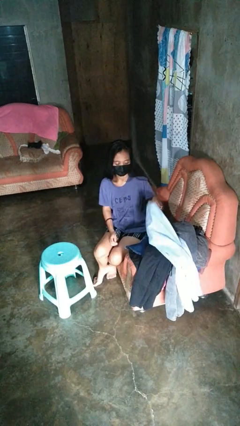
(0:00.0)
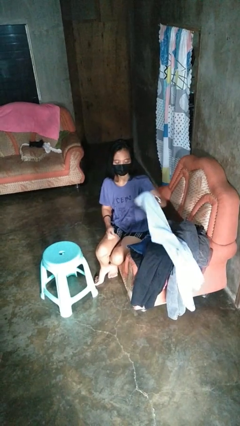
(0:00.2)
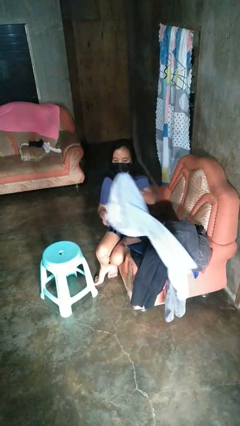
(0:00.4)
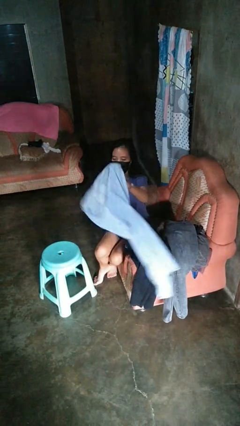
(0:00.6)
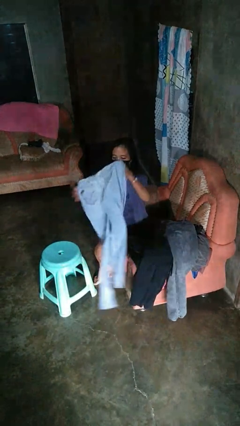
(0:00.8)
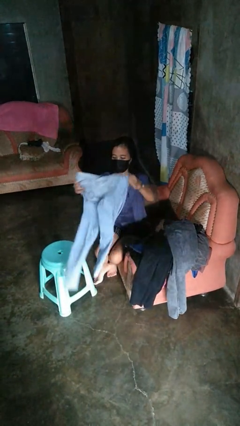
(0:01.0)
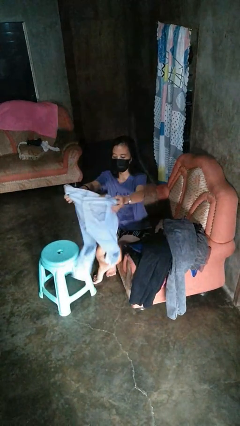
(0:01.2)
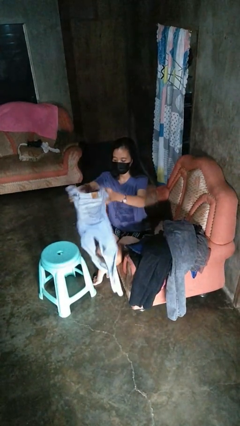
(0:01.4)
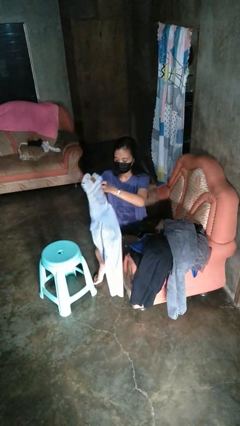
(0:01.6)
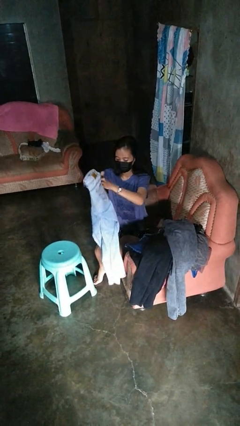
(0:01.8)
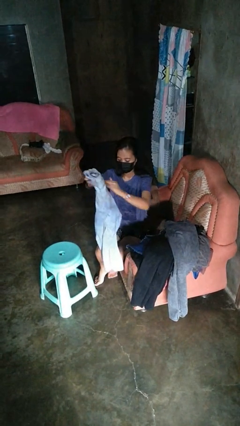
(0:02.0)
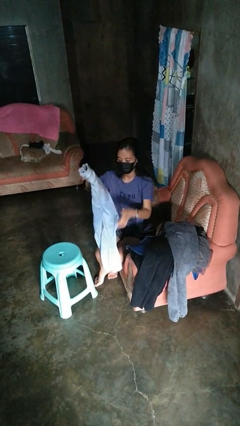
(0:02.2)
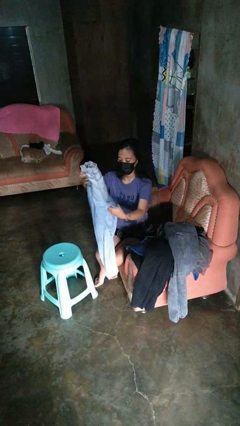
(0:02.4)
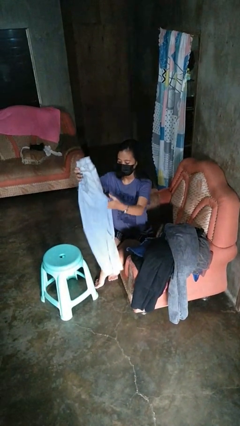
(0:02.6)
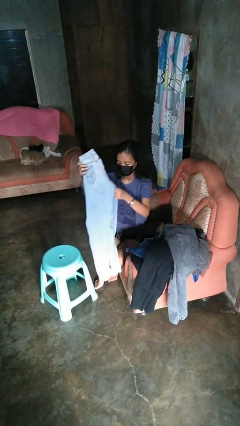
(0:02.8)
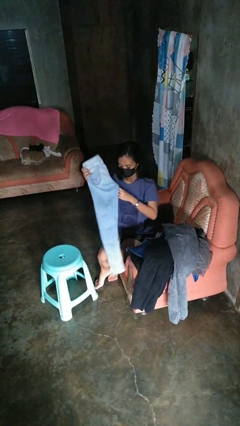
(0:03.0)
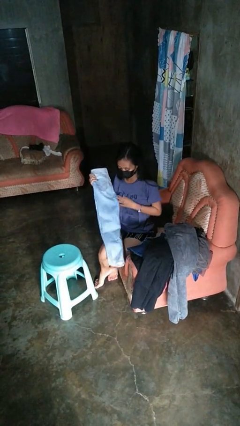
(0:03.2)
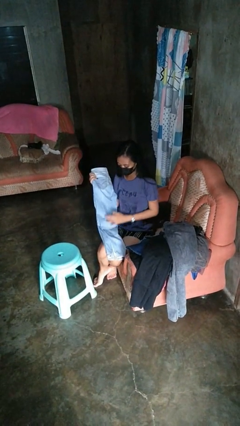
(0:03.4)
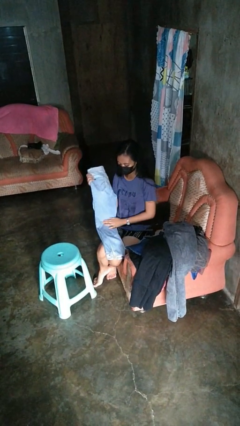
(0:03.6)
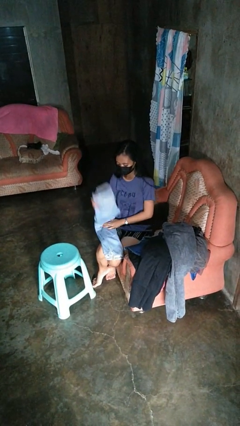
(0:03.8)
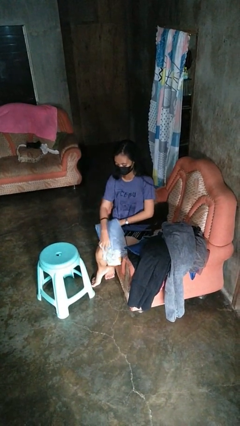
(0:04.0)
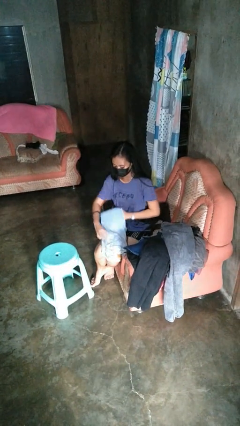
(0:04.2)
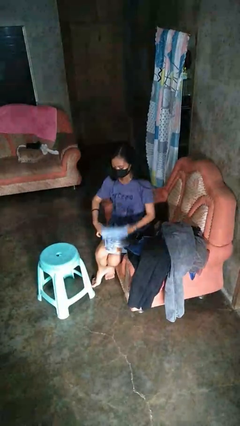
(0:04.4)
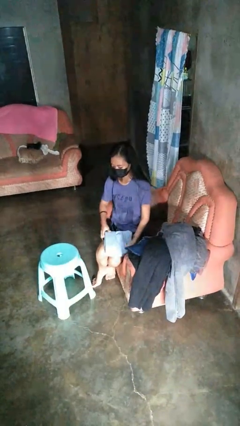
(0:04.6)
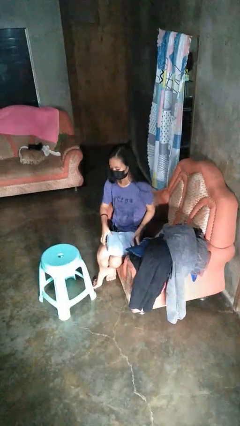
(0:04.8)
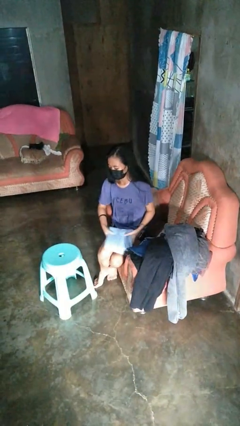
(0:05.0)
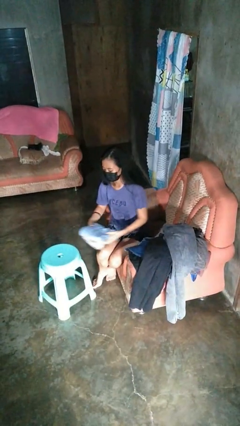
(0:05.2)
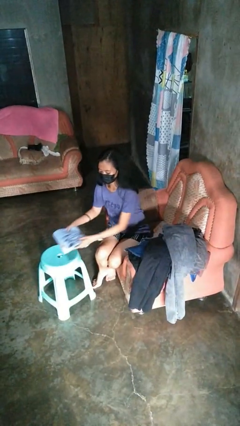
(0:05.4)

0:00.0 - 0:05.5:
person folds pants

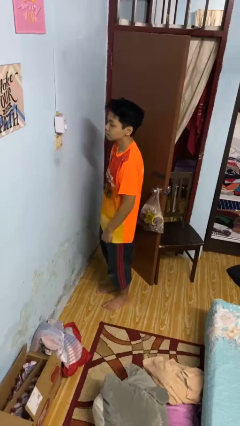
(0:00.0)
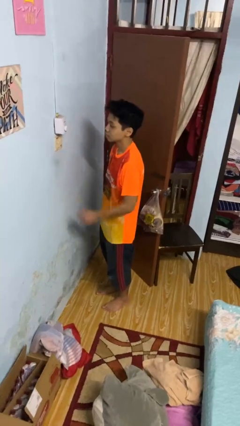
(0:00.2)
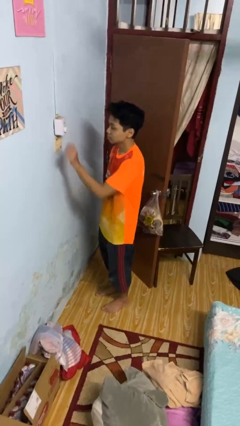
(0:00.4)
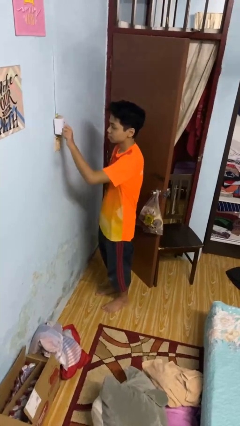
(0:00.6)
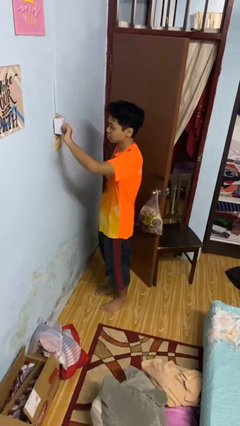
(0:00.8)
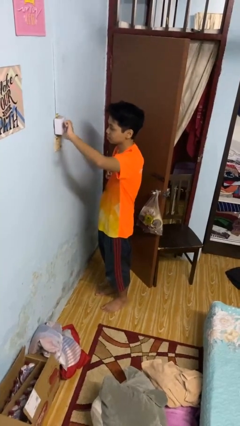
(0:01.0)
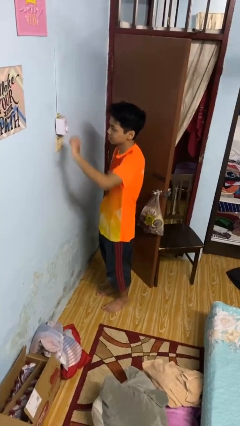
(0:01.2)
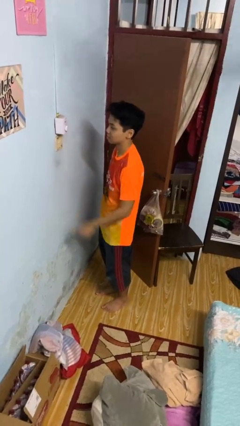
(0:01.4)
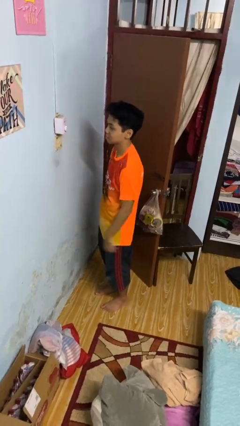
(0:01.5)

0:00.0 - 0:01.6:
person adjusts thermostat

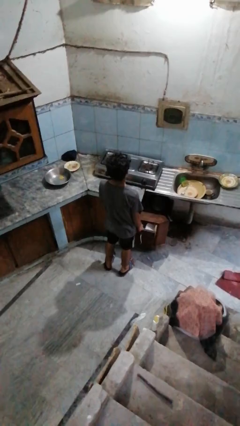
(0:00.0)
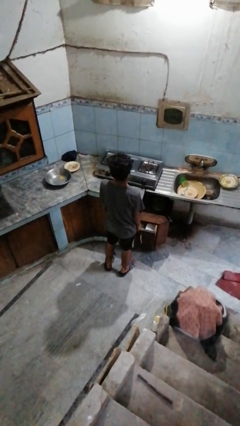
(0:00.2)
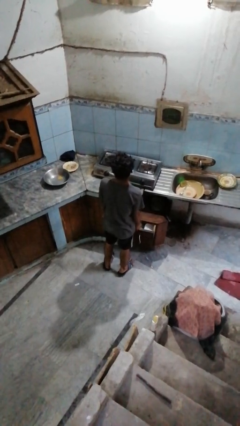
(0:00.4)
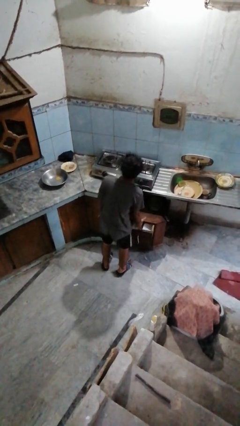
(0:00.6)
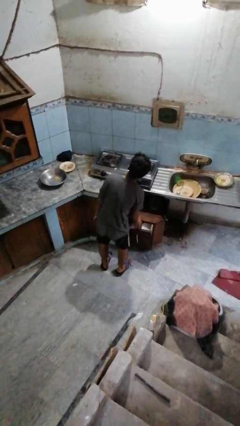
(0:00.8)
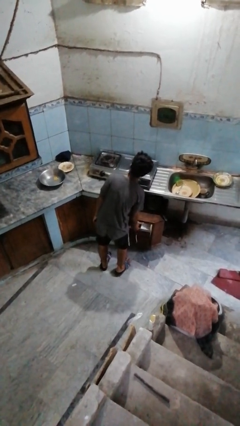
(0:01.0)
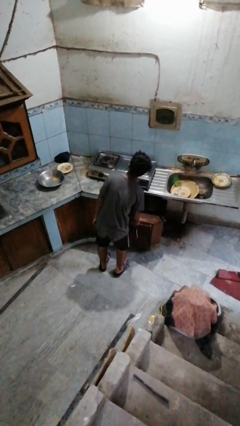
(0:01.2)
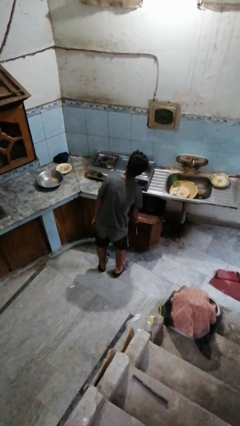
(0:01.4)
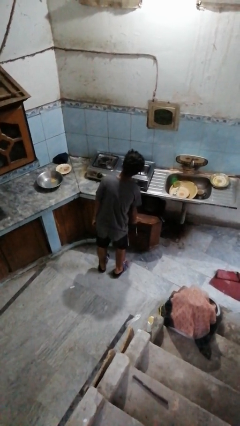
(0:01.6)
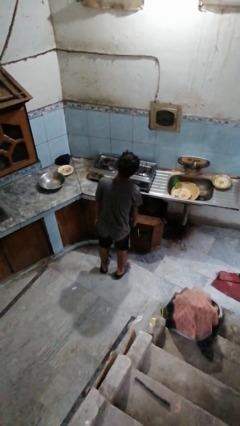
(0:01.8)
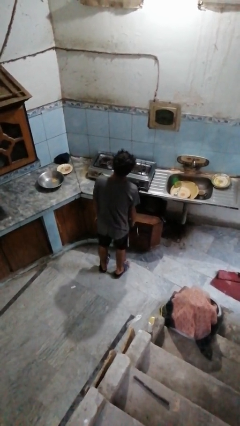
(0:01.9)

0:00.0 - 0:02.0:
person closes kitchen drawer

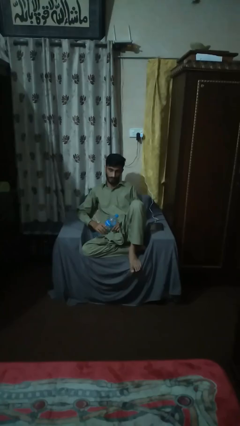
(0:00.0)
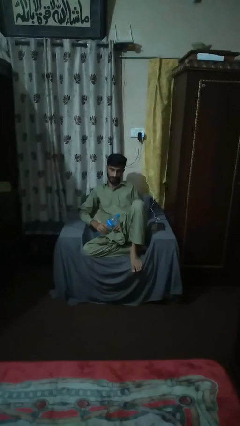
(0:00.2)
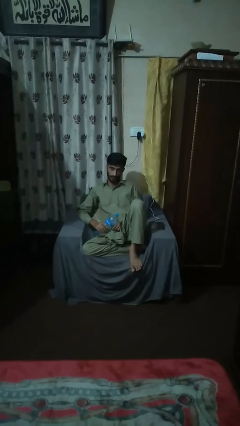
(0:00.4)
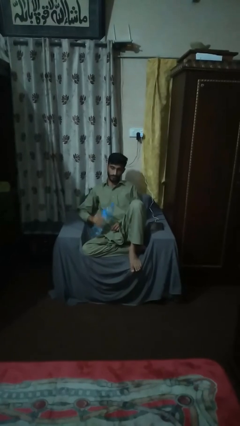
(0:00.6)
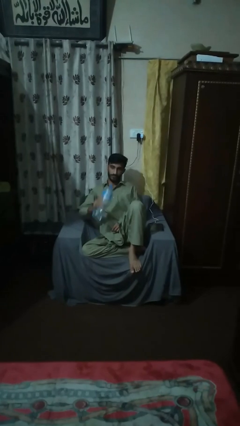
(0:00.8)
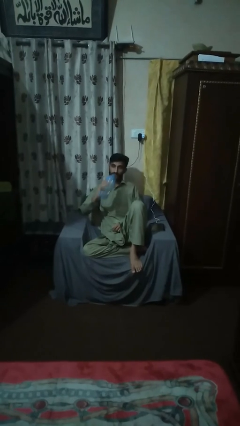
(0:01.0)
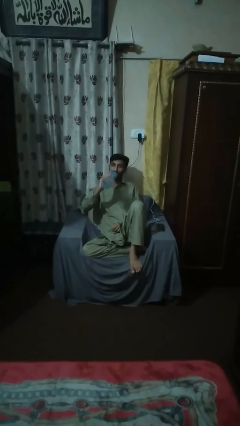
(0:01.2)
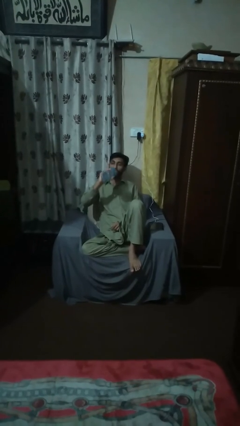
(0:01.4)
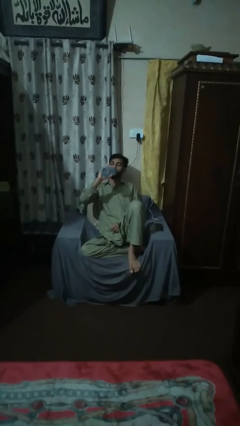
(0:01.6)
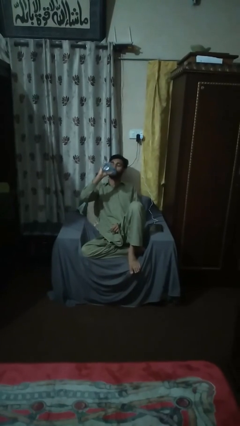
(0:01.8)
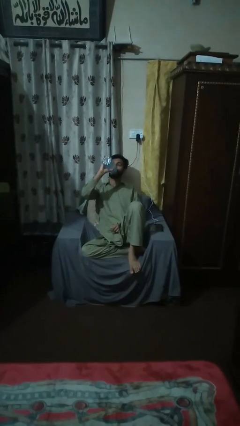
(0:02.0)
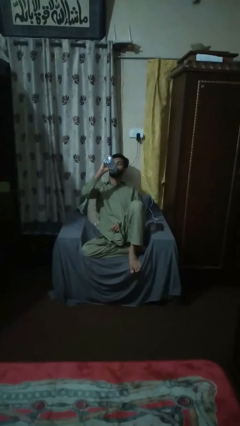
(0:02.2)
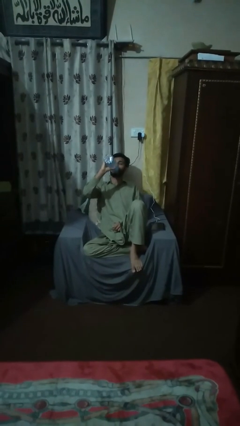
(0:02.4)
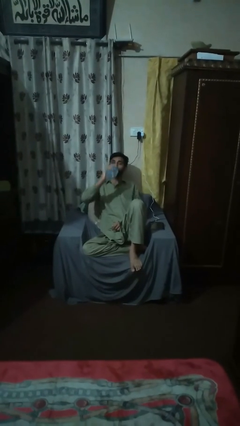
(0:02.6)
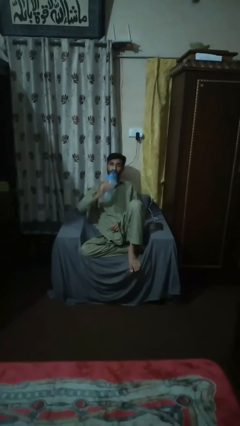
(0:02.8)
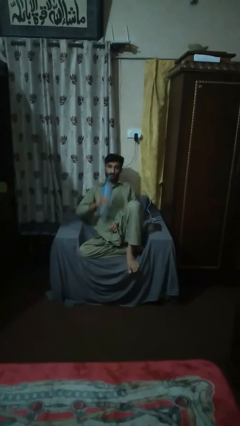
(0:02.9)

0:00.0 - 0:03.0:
person drinks from bottle

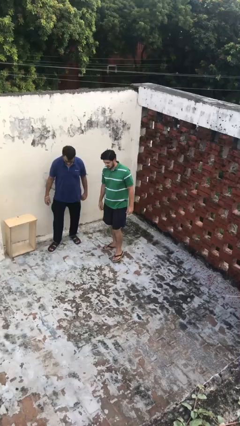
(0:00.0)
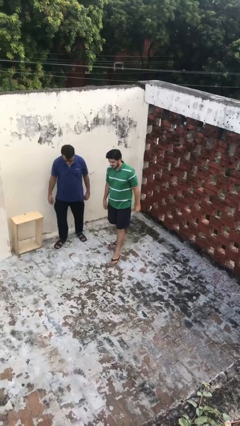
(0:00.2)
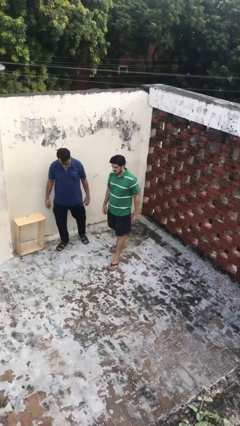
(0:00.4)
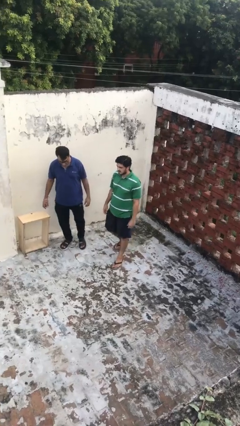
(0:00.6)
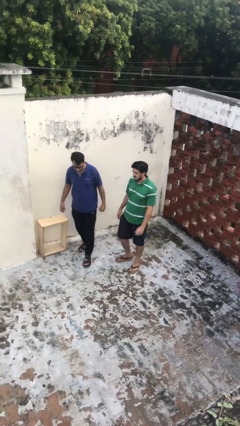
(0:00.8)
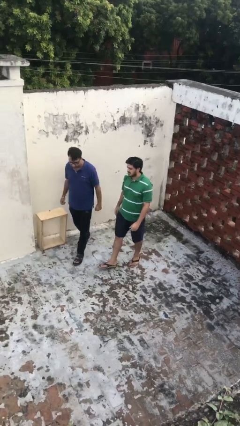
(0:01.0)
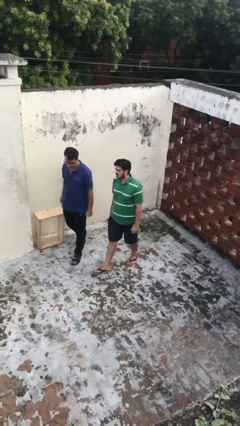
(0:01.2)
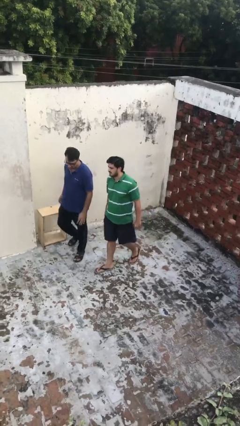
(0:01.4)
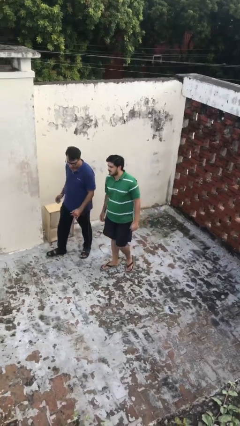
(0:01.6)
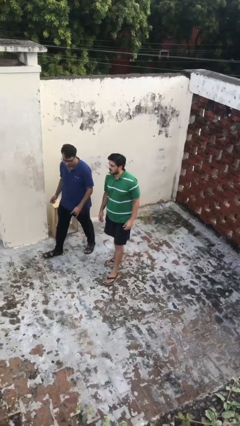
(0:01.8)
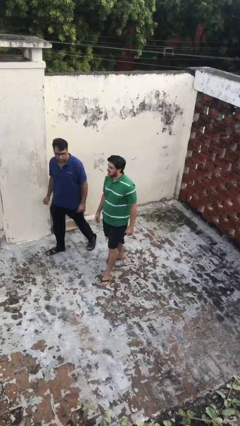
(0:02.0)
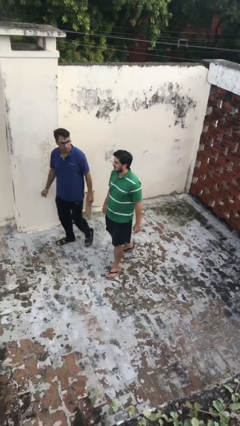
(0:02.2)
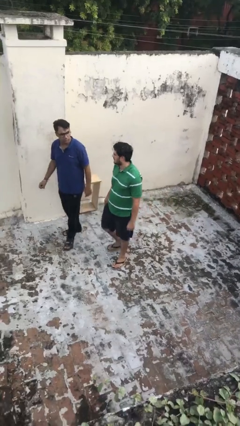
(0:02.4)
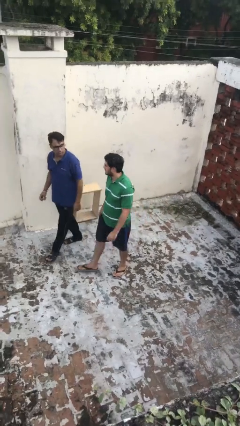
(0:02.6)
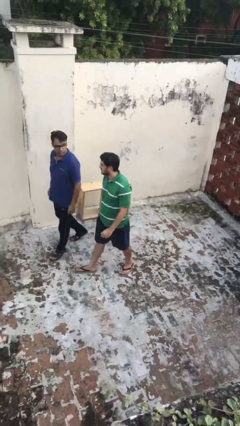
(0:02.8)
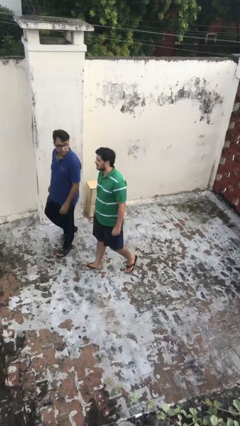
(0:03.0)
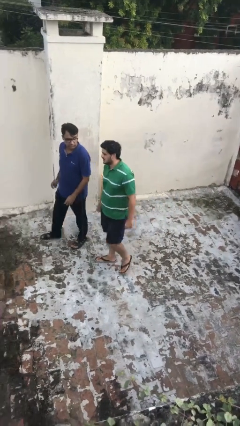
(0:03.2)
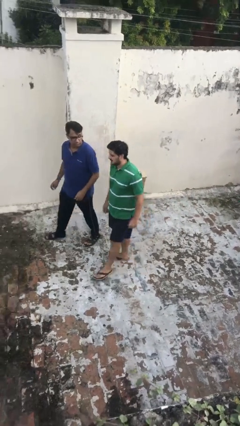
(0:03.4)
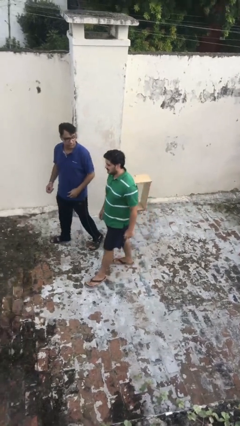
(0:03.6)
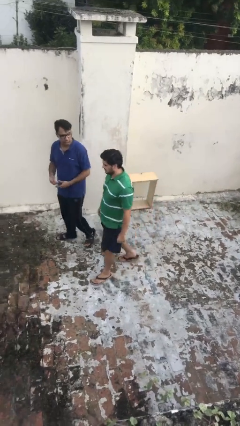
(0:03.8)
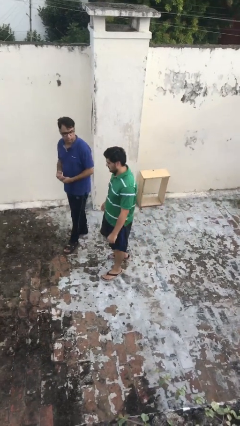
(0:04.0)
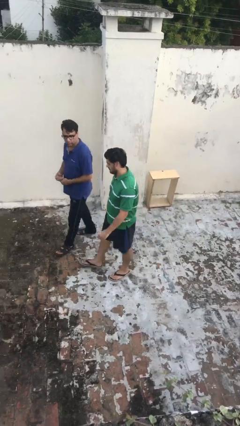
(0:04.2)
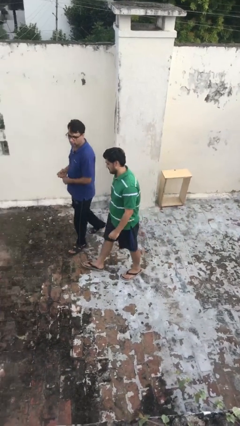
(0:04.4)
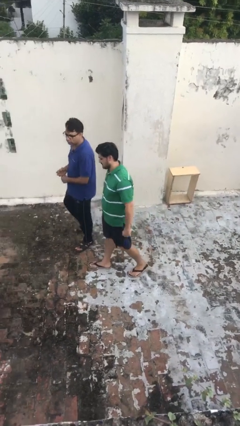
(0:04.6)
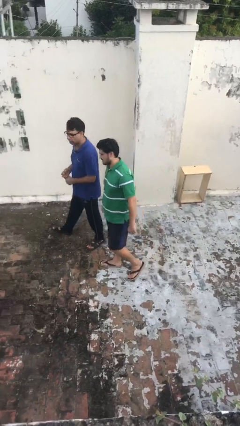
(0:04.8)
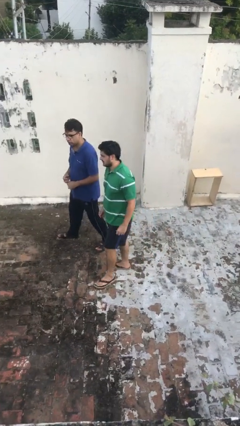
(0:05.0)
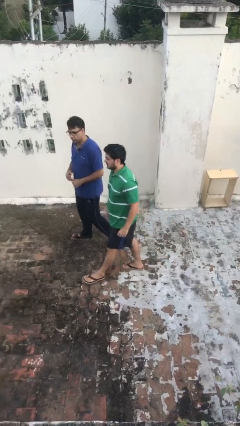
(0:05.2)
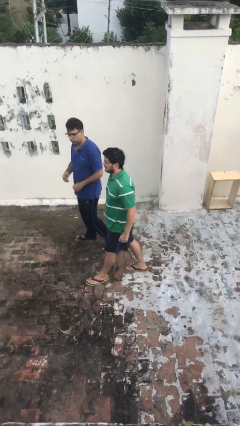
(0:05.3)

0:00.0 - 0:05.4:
person talks to person
